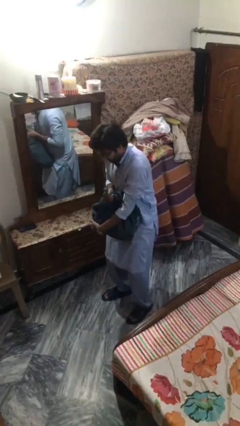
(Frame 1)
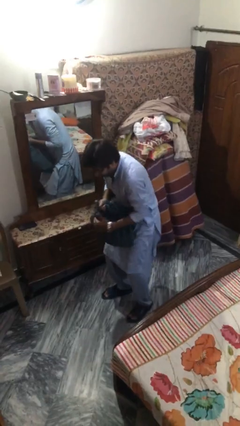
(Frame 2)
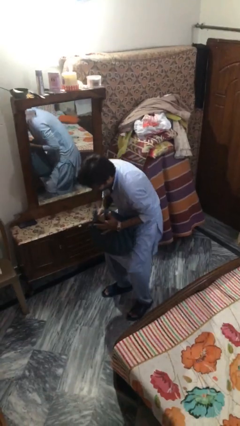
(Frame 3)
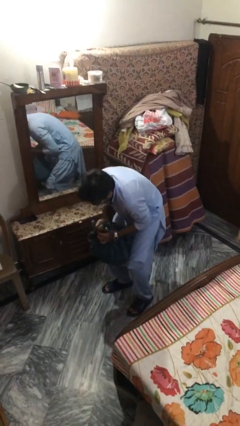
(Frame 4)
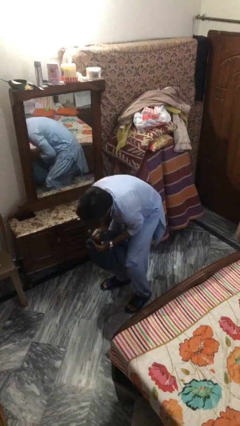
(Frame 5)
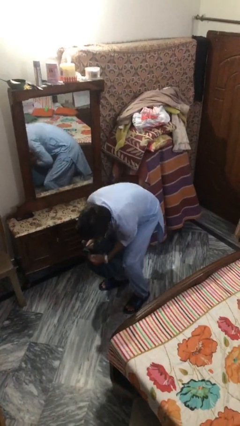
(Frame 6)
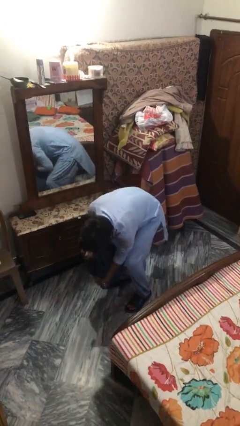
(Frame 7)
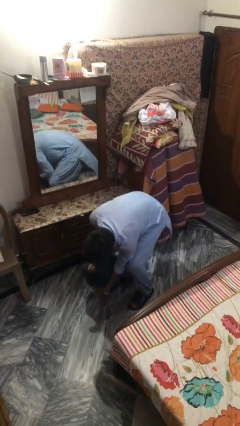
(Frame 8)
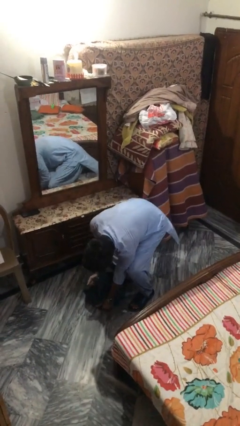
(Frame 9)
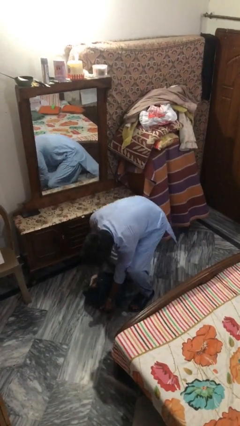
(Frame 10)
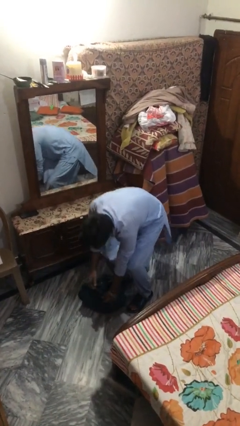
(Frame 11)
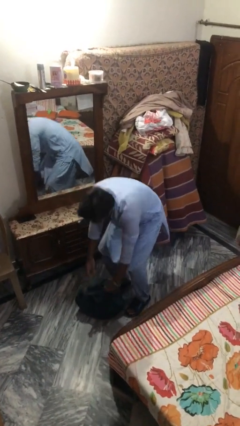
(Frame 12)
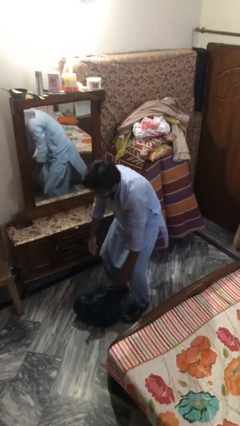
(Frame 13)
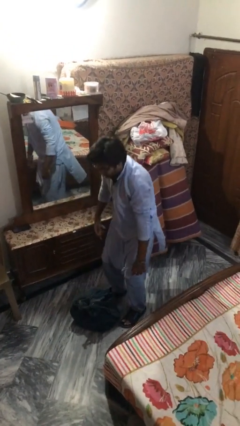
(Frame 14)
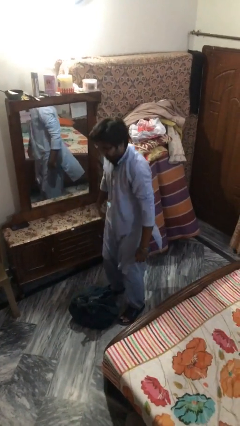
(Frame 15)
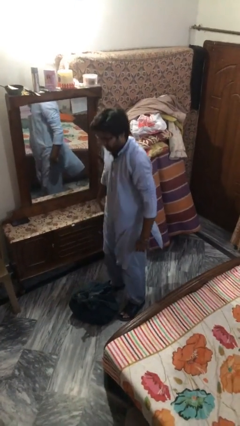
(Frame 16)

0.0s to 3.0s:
person puts down object on floor

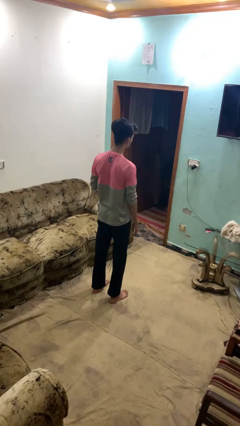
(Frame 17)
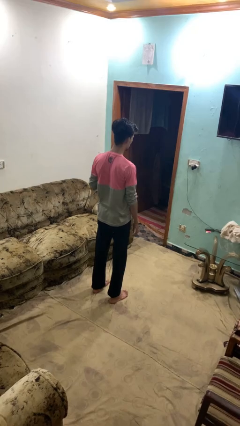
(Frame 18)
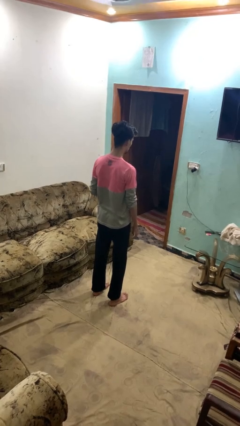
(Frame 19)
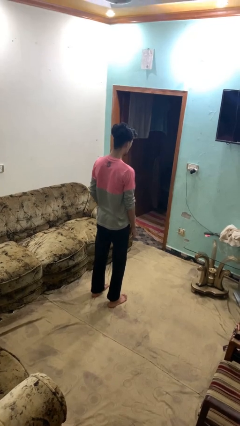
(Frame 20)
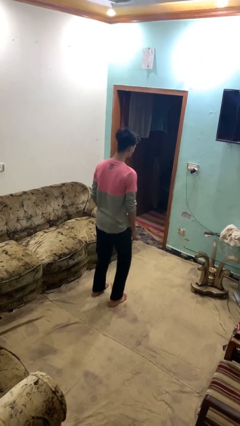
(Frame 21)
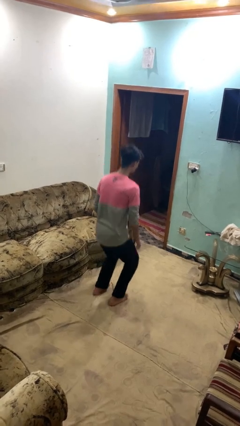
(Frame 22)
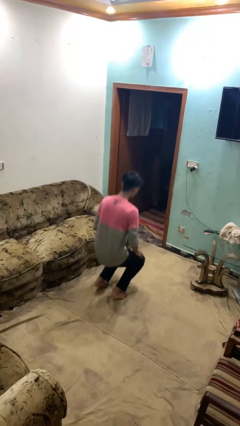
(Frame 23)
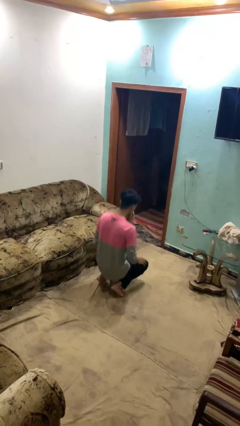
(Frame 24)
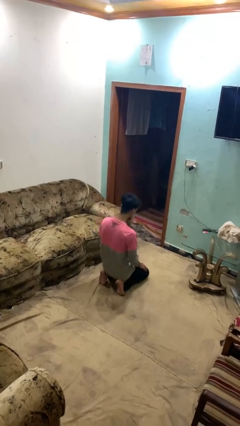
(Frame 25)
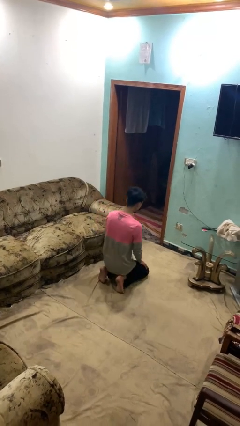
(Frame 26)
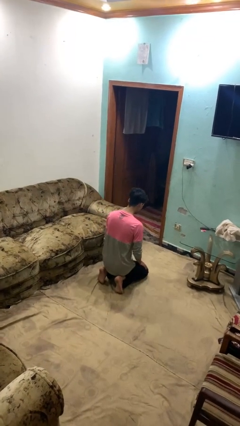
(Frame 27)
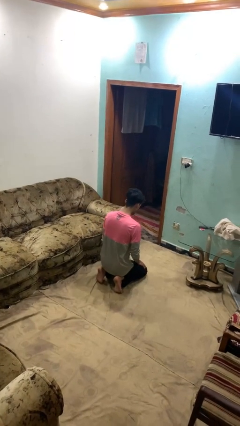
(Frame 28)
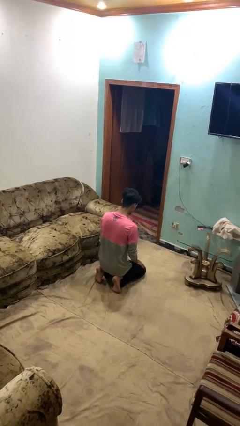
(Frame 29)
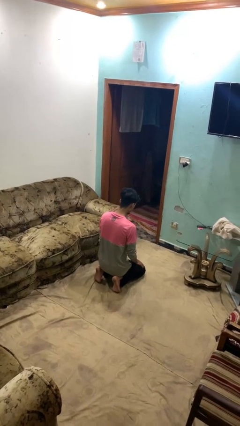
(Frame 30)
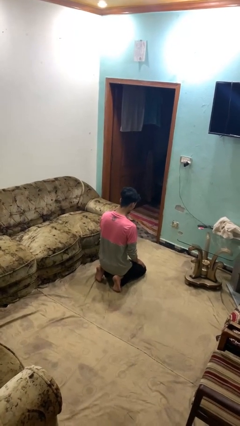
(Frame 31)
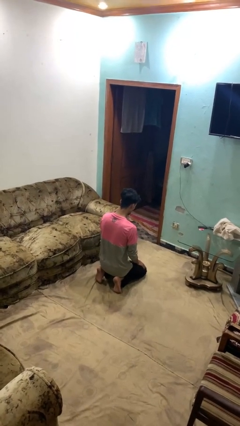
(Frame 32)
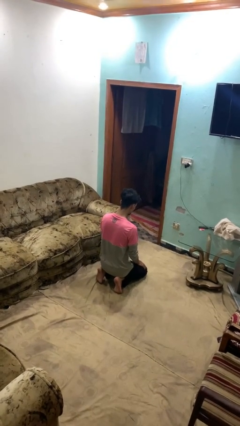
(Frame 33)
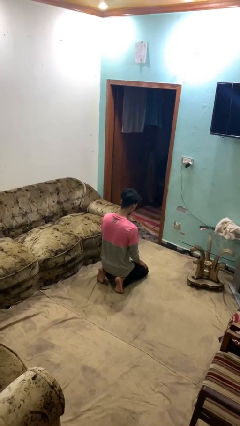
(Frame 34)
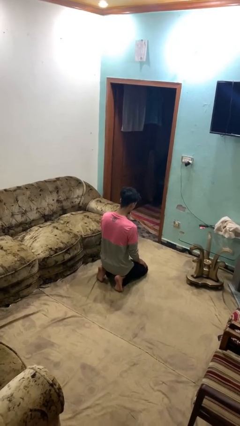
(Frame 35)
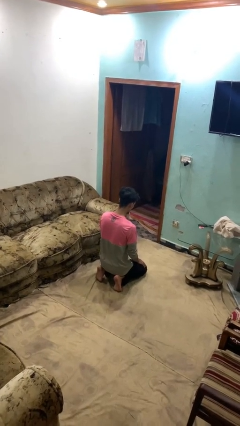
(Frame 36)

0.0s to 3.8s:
person kneels

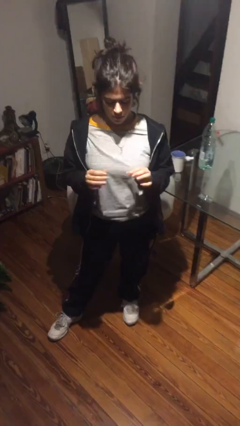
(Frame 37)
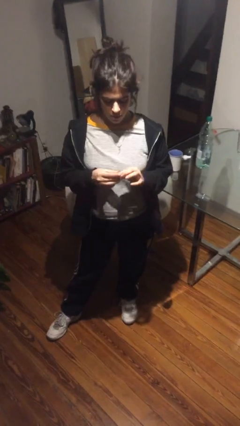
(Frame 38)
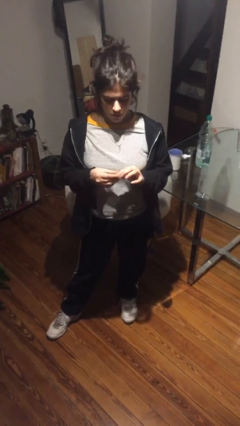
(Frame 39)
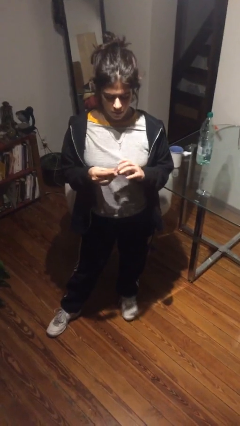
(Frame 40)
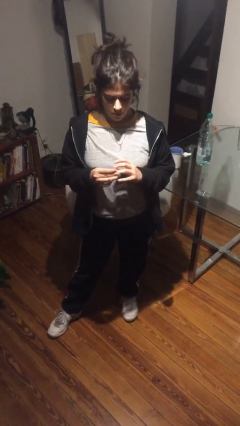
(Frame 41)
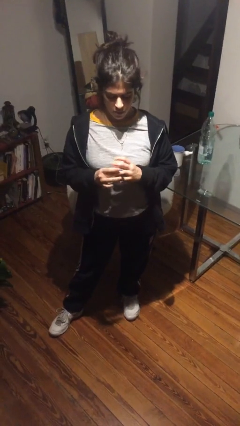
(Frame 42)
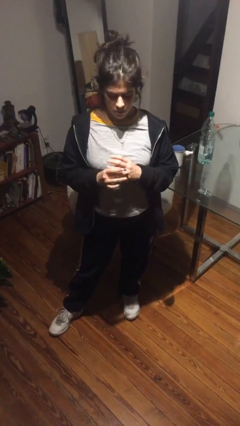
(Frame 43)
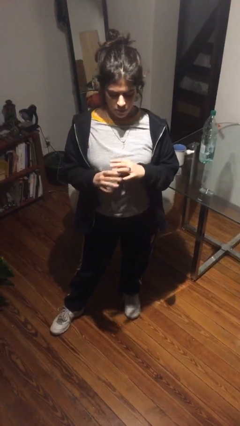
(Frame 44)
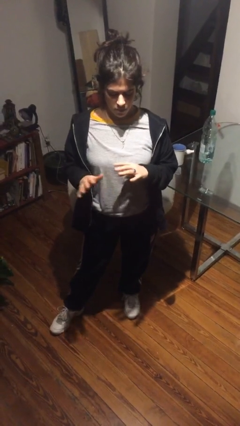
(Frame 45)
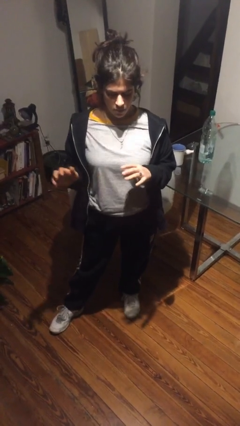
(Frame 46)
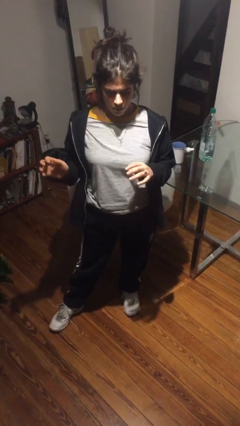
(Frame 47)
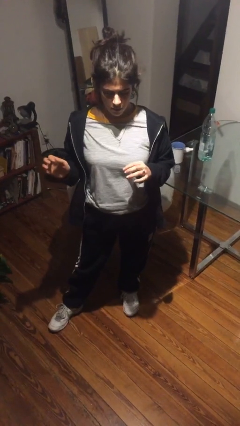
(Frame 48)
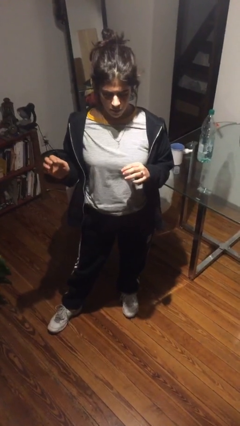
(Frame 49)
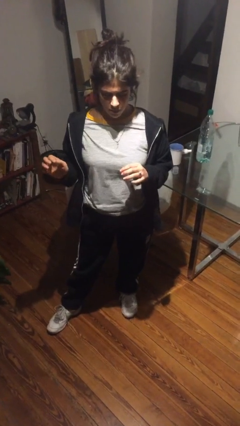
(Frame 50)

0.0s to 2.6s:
person puts on ring

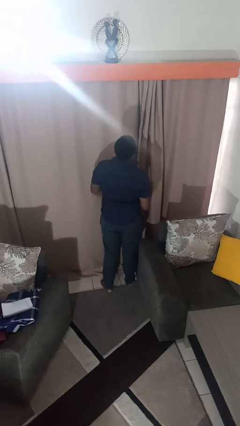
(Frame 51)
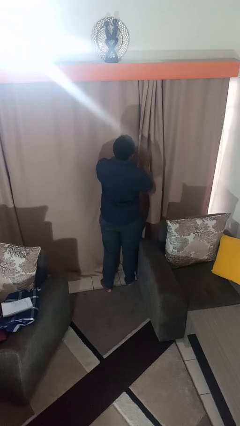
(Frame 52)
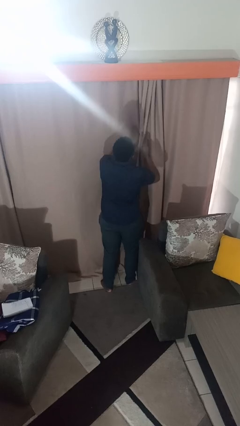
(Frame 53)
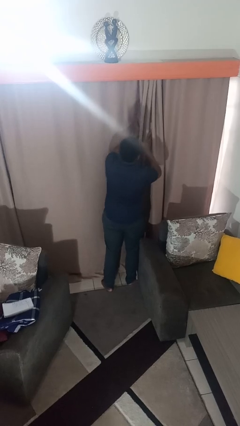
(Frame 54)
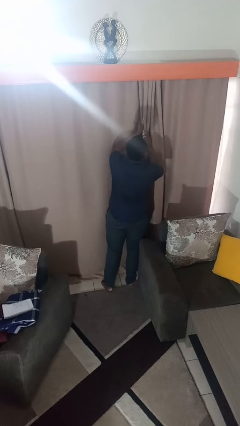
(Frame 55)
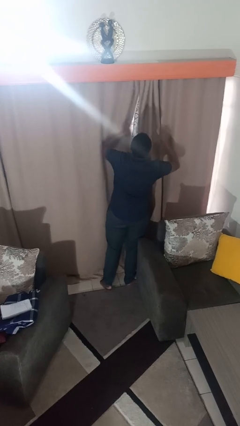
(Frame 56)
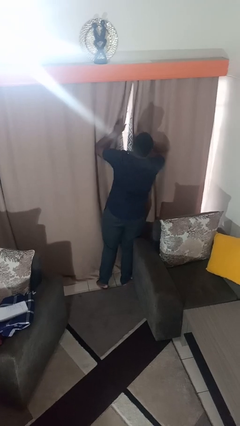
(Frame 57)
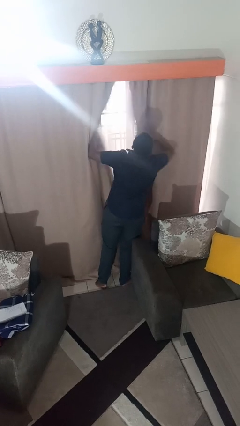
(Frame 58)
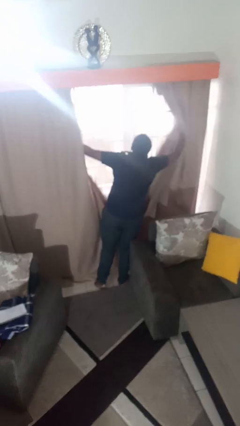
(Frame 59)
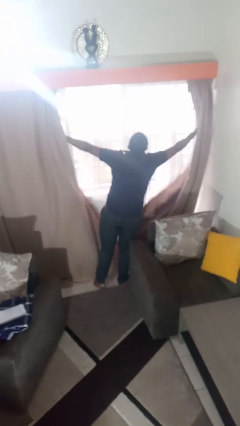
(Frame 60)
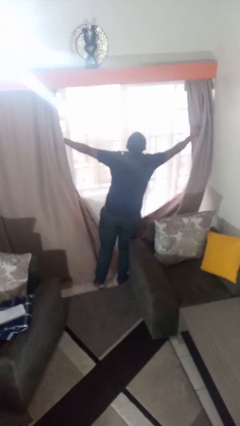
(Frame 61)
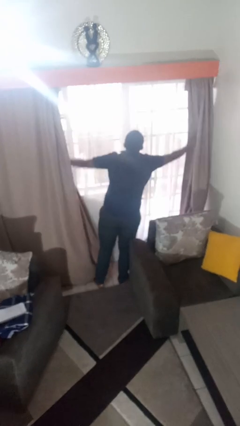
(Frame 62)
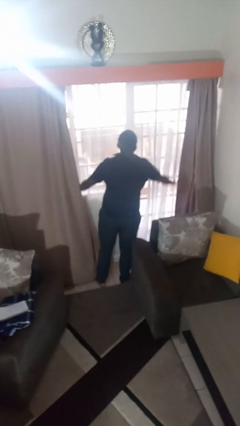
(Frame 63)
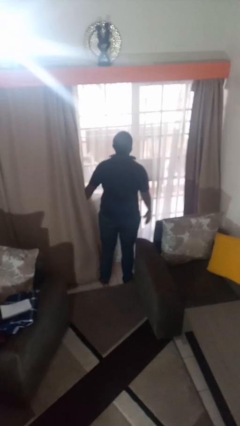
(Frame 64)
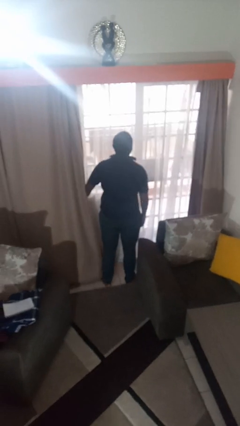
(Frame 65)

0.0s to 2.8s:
person opens curtains

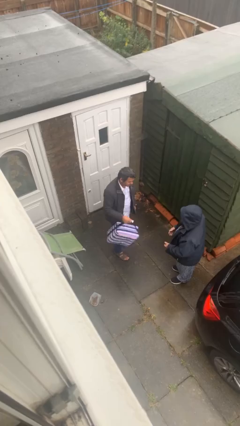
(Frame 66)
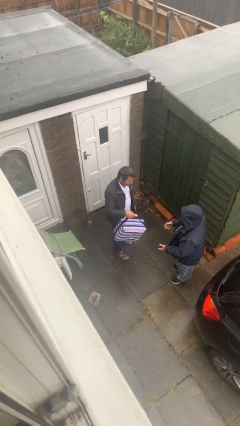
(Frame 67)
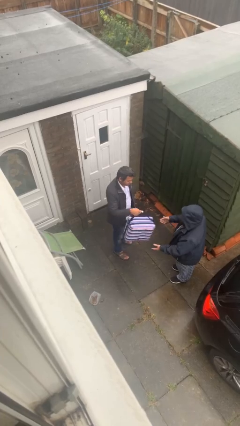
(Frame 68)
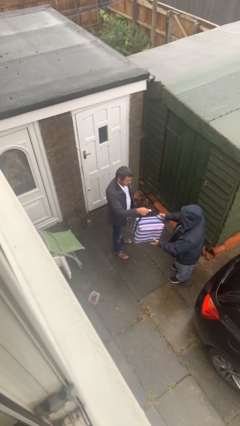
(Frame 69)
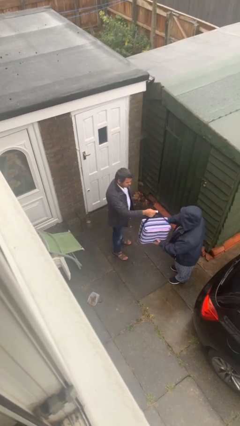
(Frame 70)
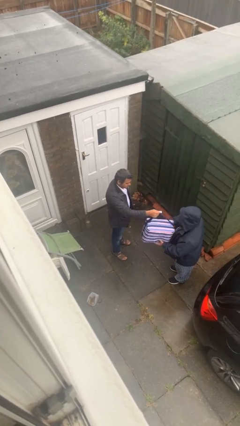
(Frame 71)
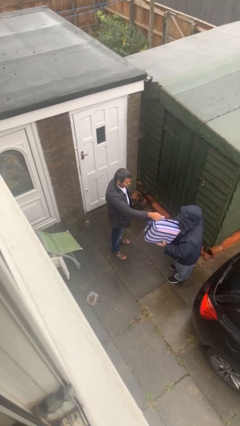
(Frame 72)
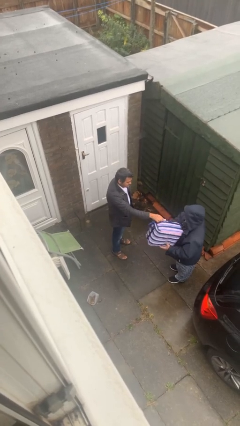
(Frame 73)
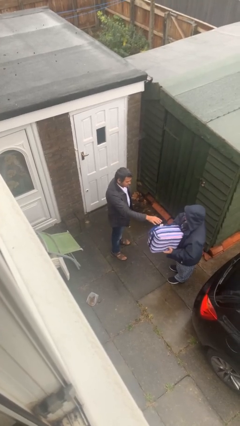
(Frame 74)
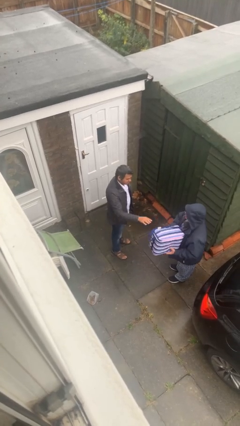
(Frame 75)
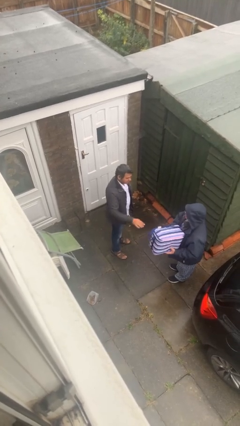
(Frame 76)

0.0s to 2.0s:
person transfers object to person

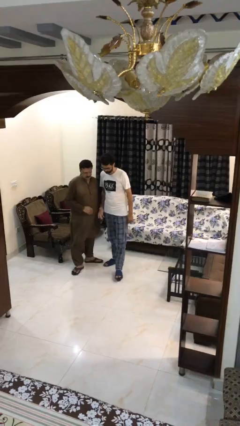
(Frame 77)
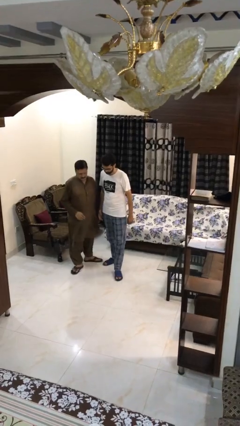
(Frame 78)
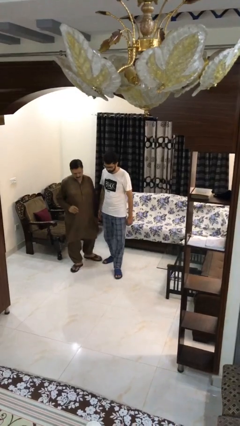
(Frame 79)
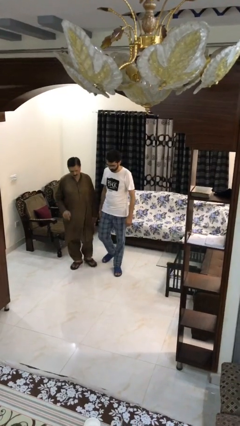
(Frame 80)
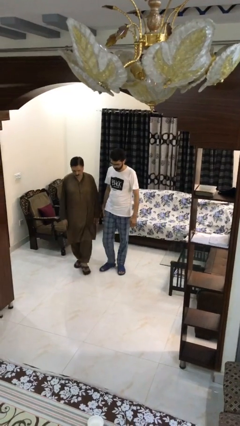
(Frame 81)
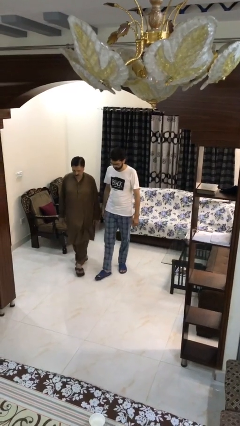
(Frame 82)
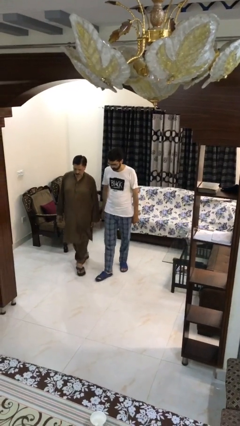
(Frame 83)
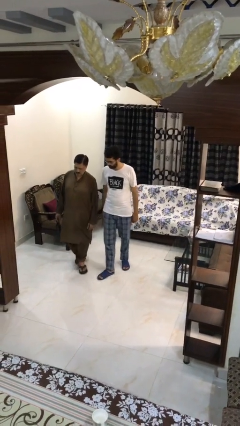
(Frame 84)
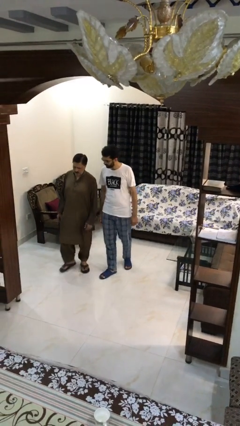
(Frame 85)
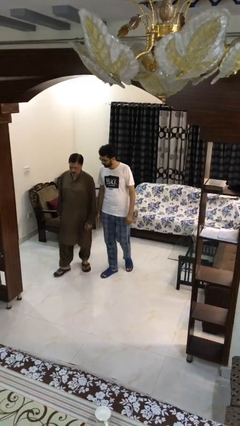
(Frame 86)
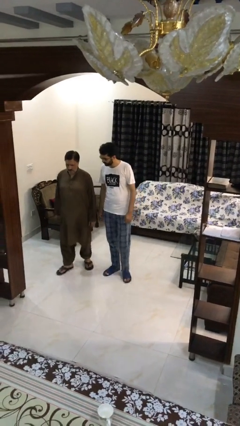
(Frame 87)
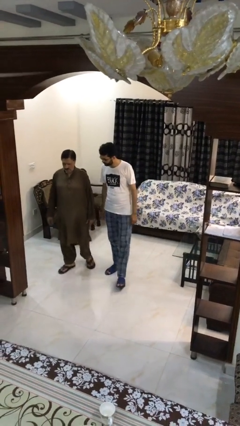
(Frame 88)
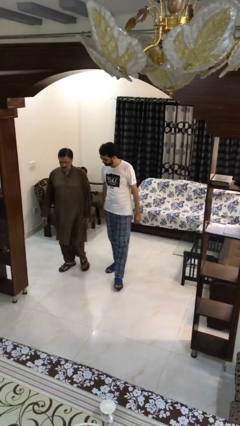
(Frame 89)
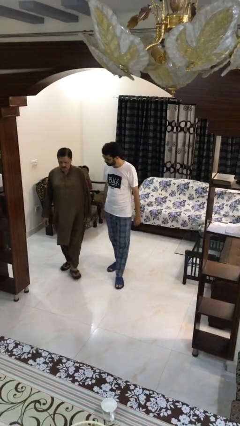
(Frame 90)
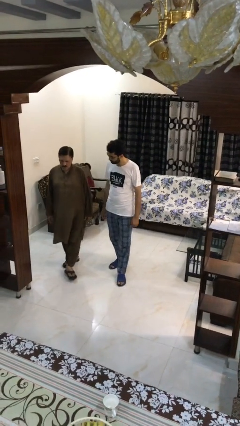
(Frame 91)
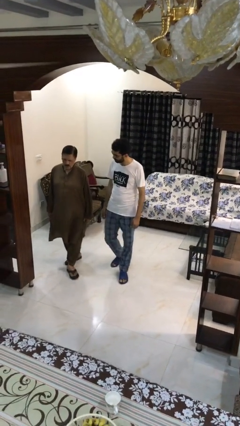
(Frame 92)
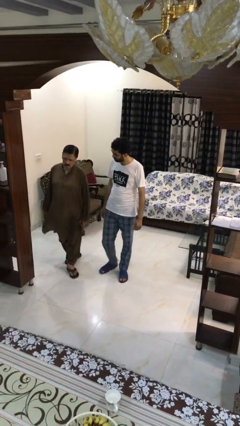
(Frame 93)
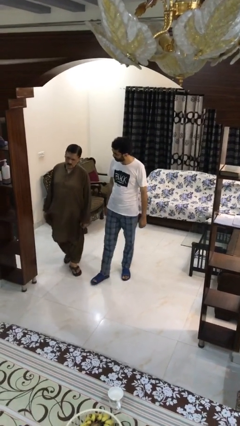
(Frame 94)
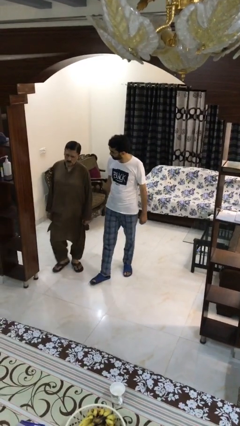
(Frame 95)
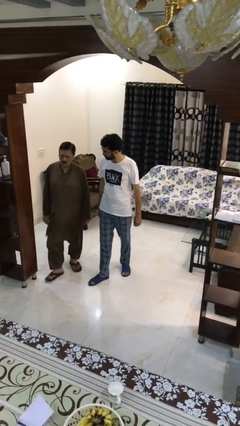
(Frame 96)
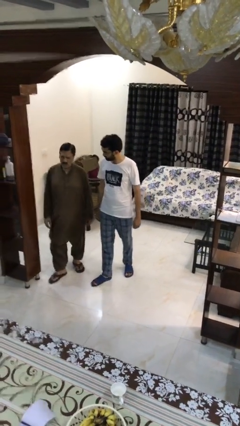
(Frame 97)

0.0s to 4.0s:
person talks to person
